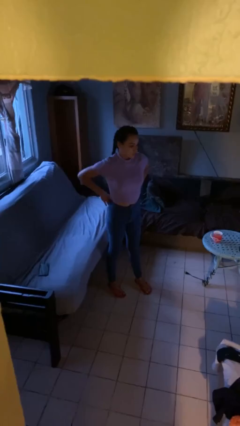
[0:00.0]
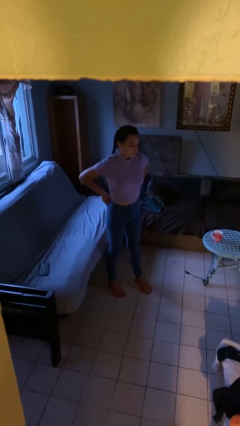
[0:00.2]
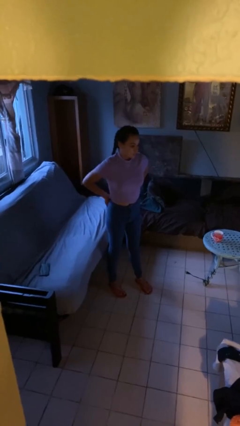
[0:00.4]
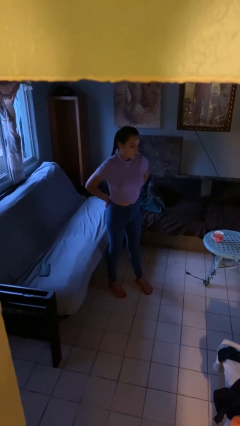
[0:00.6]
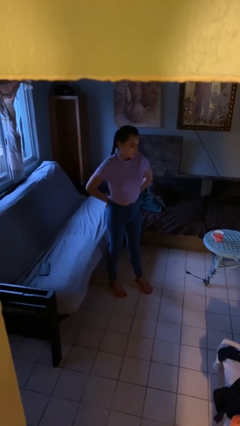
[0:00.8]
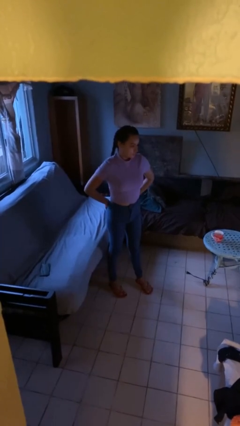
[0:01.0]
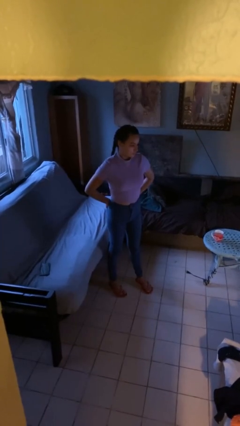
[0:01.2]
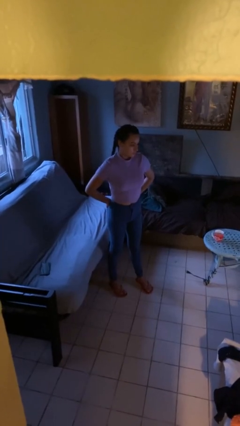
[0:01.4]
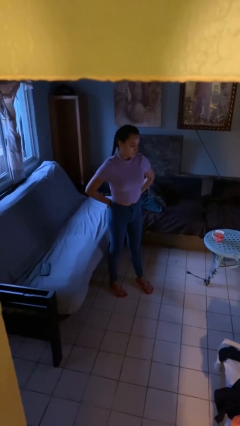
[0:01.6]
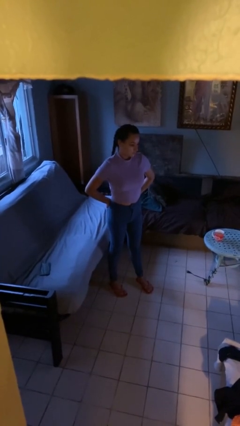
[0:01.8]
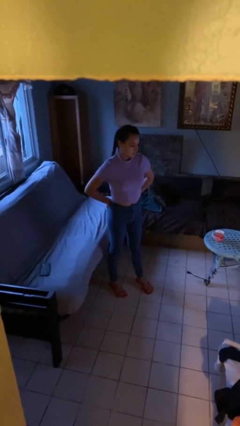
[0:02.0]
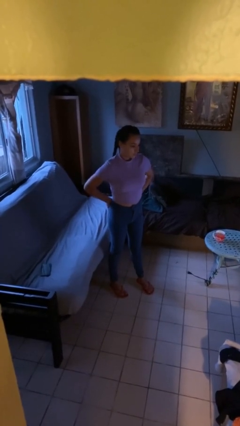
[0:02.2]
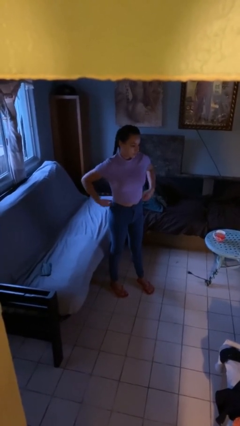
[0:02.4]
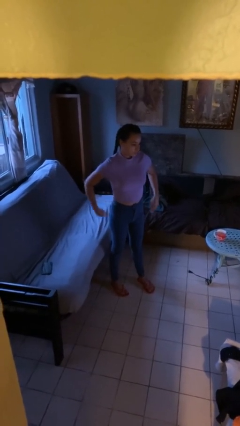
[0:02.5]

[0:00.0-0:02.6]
person puts hands in back pockets

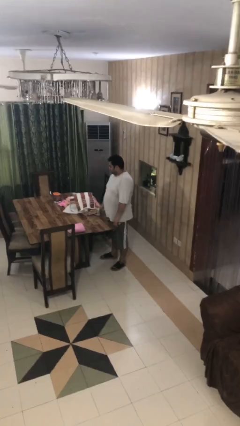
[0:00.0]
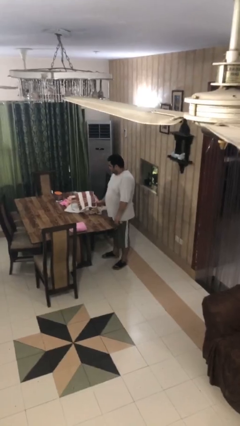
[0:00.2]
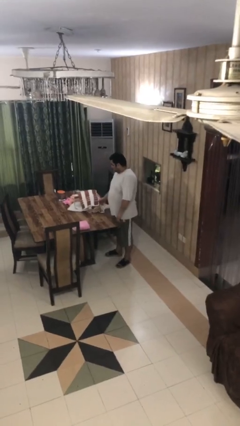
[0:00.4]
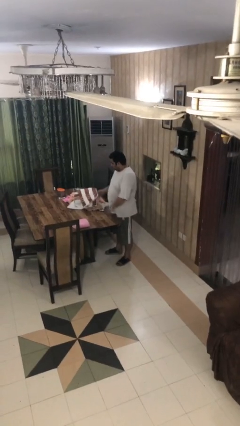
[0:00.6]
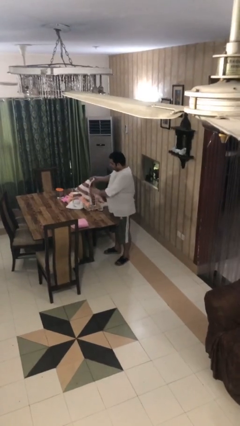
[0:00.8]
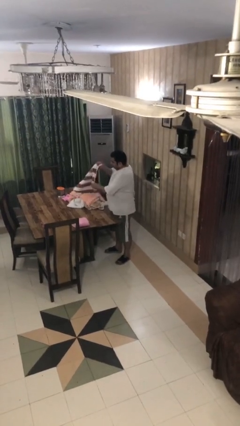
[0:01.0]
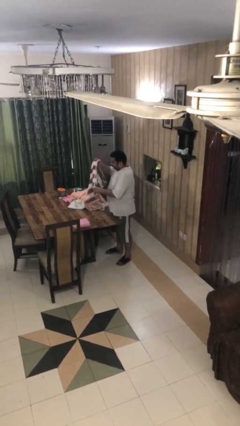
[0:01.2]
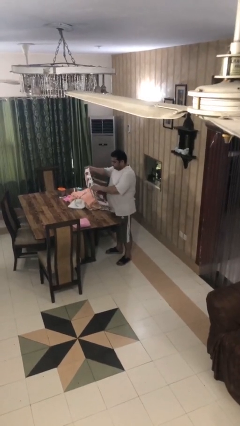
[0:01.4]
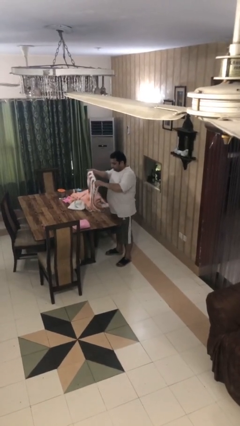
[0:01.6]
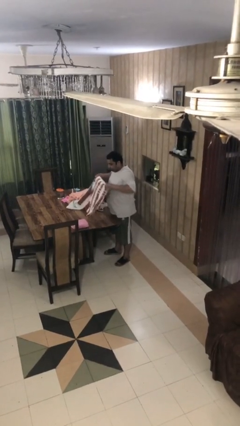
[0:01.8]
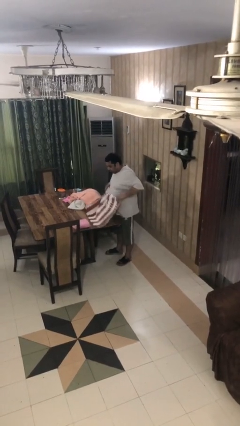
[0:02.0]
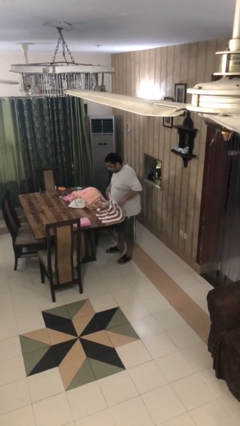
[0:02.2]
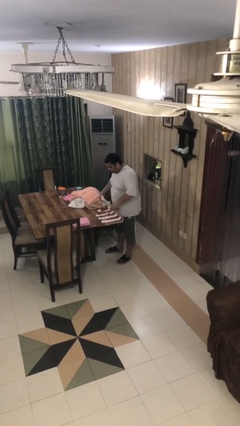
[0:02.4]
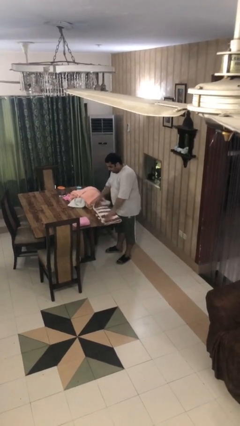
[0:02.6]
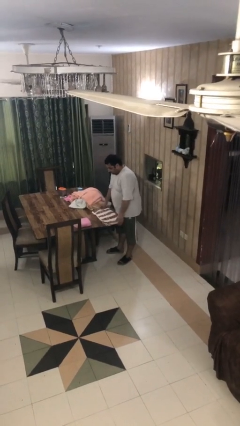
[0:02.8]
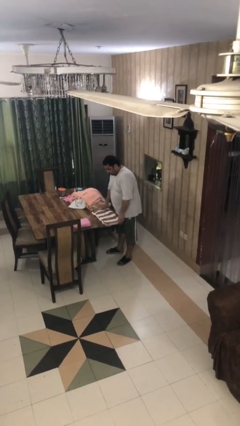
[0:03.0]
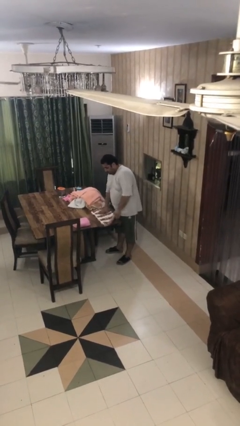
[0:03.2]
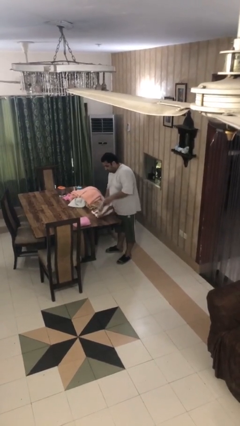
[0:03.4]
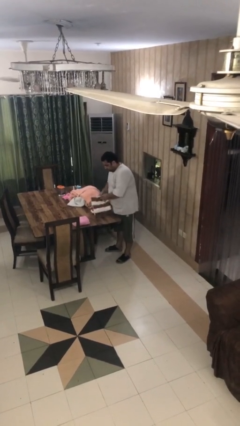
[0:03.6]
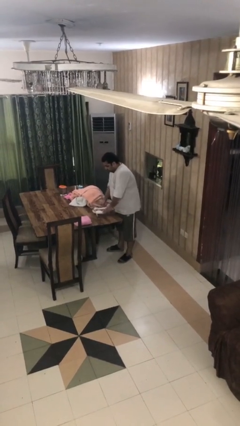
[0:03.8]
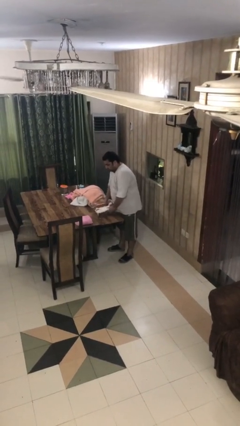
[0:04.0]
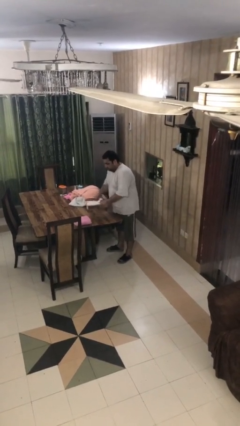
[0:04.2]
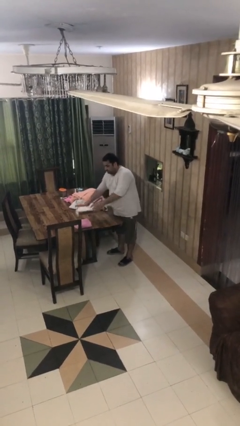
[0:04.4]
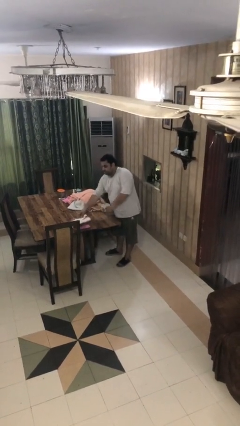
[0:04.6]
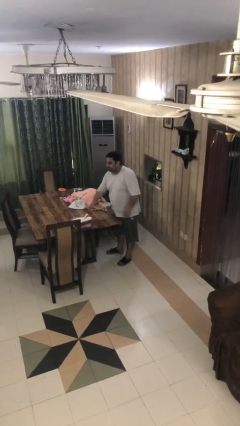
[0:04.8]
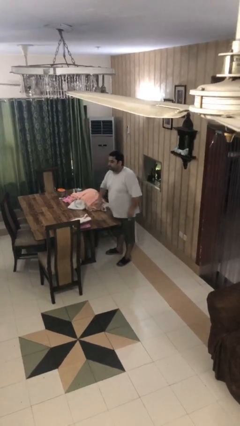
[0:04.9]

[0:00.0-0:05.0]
person folds towel

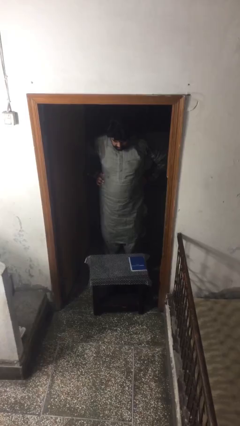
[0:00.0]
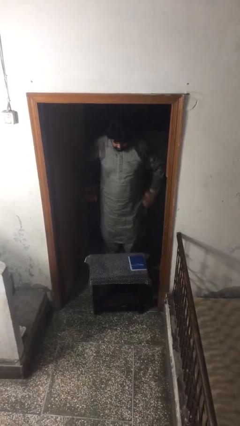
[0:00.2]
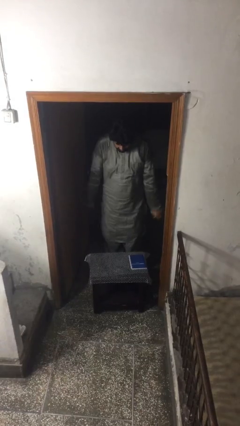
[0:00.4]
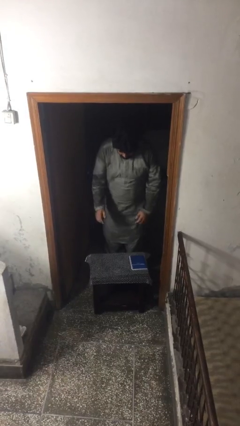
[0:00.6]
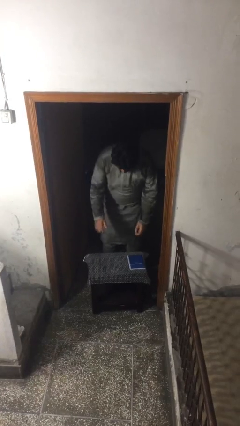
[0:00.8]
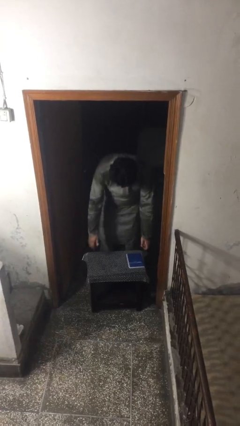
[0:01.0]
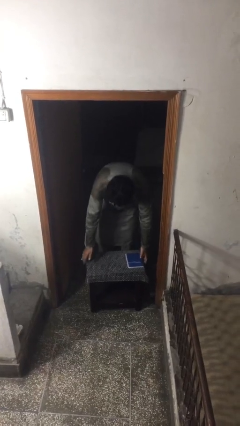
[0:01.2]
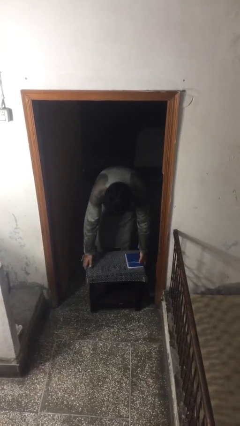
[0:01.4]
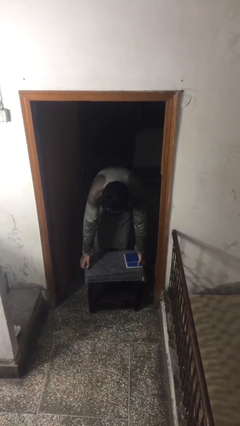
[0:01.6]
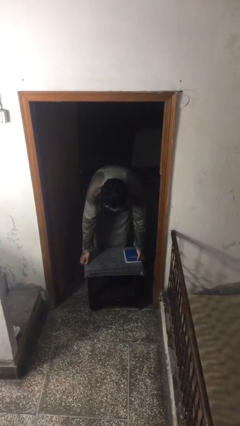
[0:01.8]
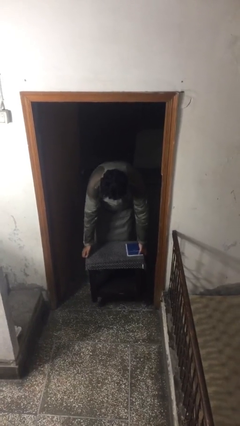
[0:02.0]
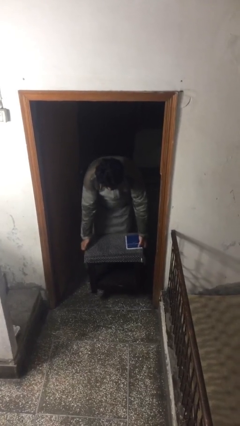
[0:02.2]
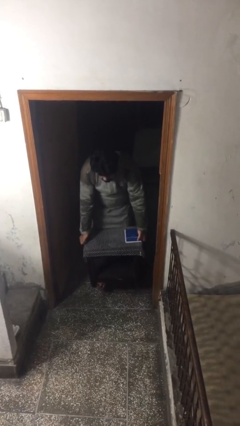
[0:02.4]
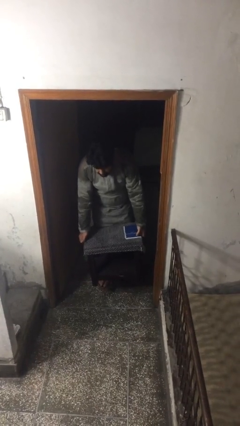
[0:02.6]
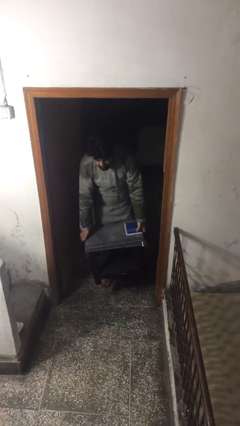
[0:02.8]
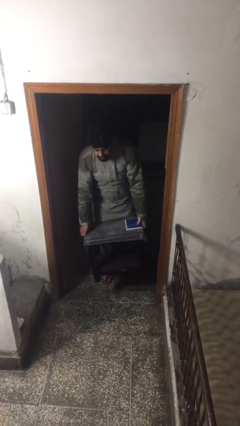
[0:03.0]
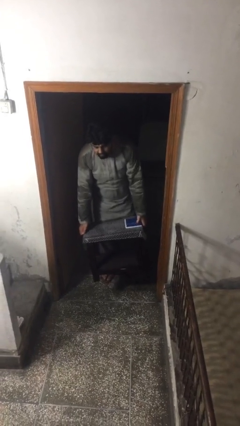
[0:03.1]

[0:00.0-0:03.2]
person picks up object from floor

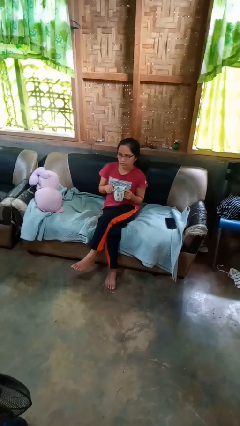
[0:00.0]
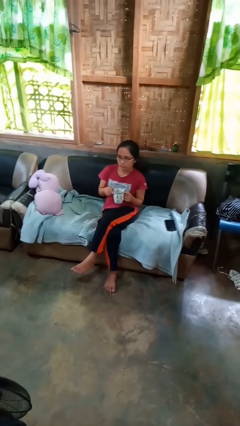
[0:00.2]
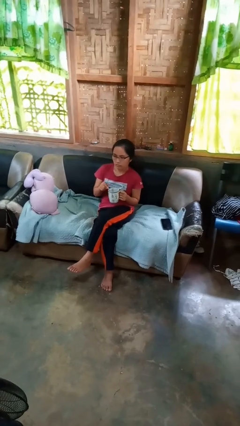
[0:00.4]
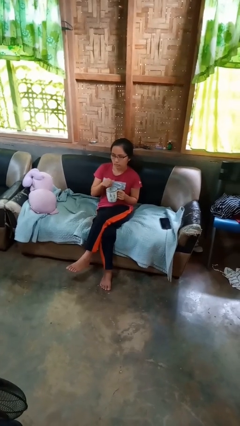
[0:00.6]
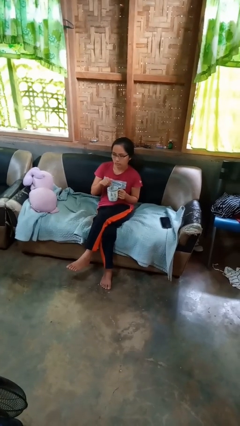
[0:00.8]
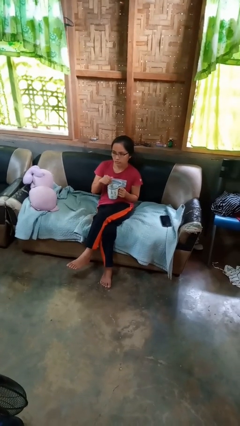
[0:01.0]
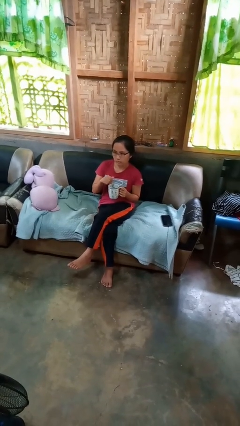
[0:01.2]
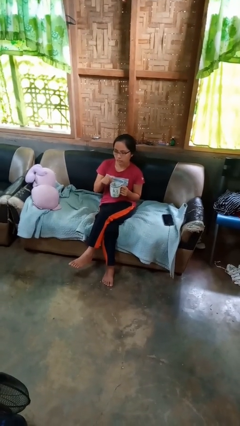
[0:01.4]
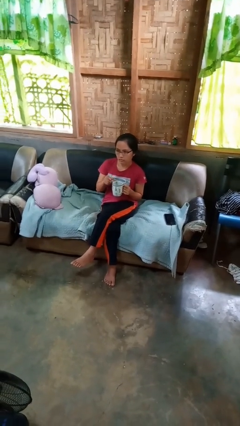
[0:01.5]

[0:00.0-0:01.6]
person stirs mug

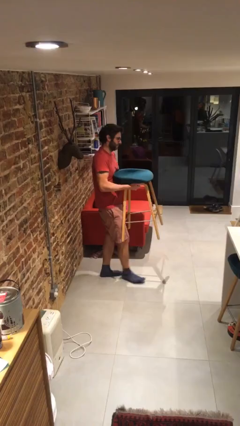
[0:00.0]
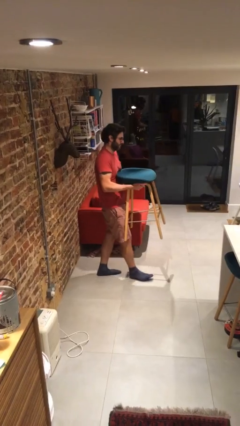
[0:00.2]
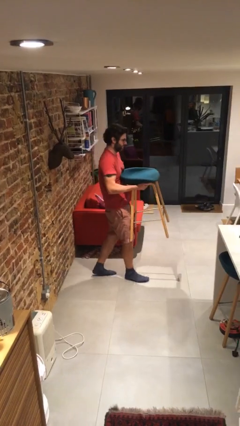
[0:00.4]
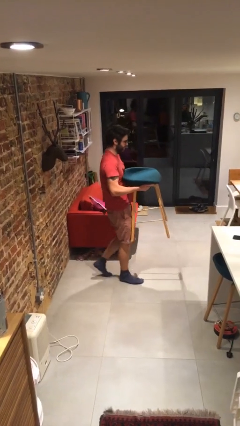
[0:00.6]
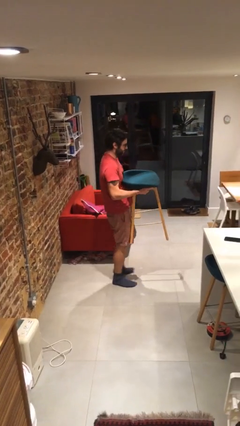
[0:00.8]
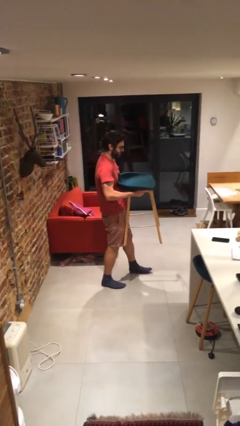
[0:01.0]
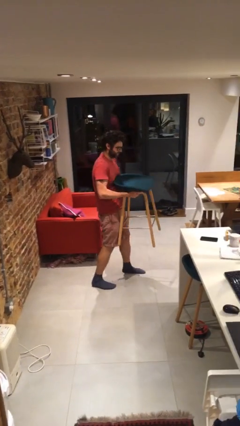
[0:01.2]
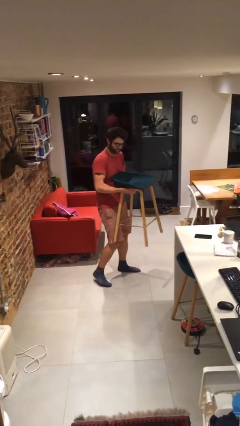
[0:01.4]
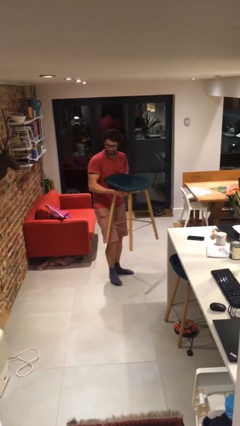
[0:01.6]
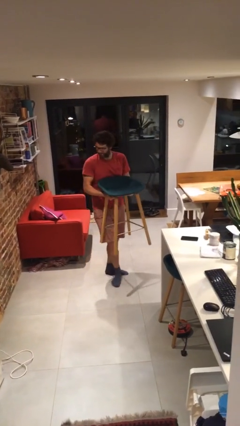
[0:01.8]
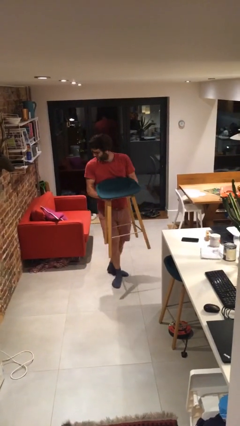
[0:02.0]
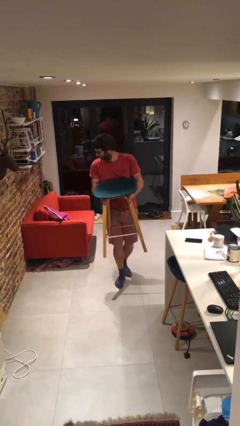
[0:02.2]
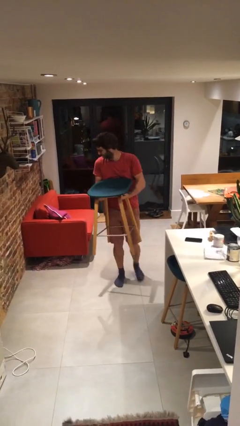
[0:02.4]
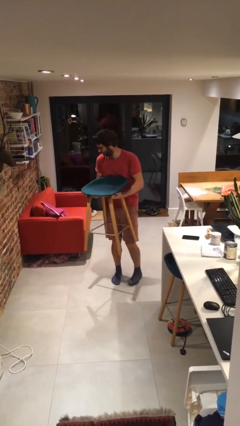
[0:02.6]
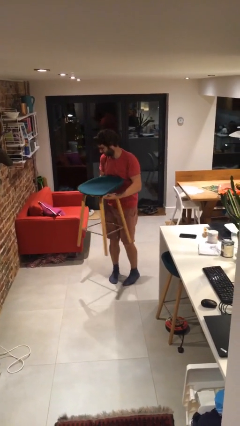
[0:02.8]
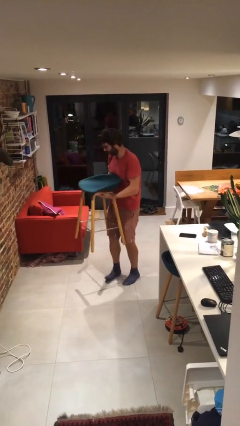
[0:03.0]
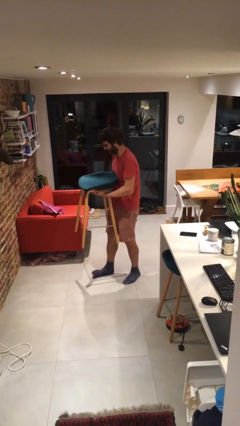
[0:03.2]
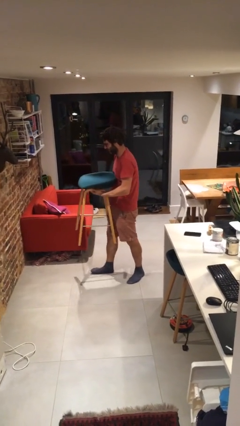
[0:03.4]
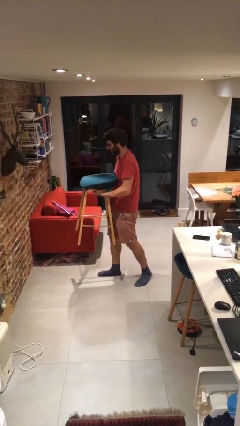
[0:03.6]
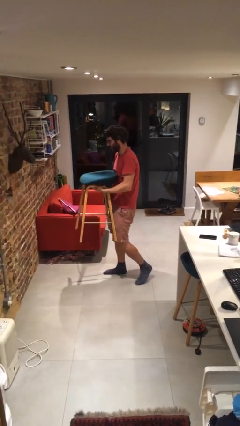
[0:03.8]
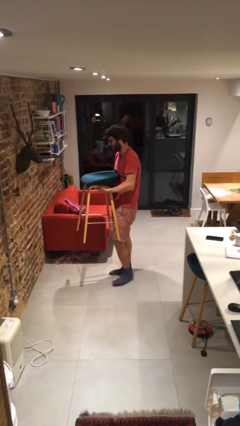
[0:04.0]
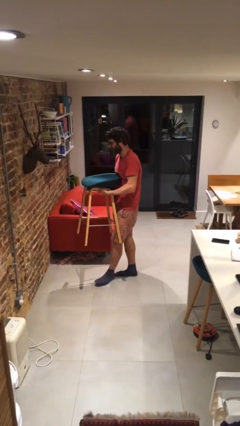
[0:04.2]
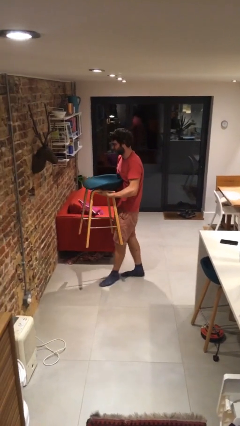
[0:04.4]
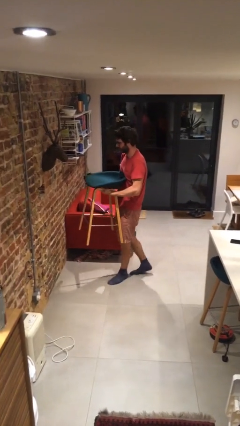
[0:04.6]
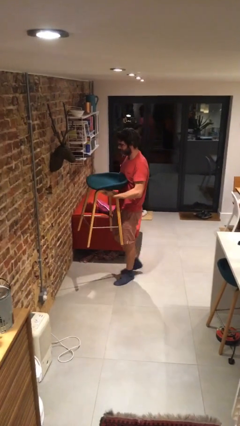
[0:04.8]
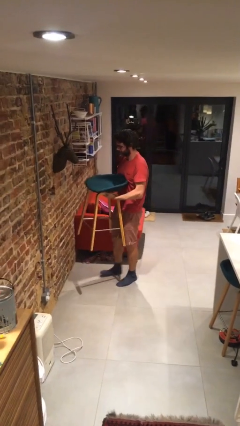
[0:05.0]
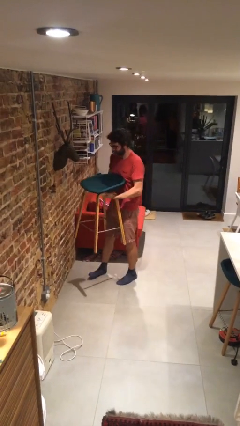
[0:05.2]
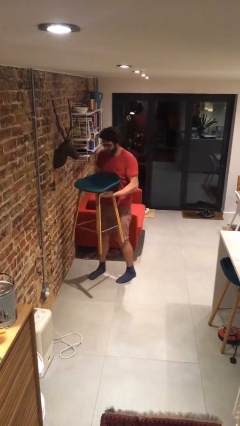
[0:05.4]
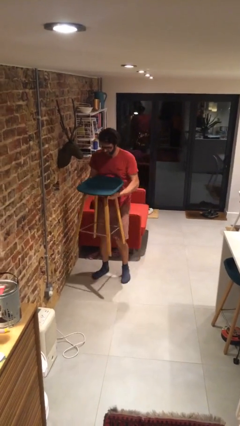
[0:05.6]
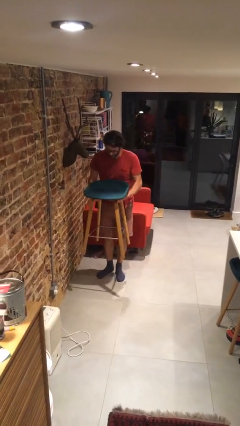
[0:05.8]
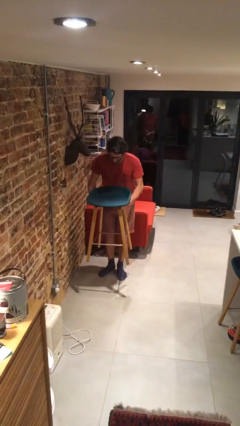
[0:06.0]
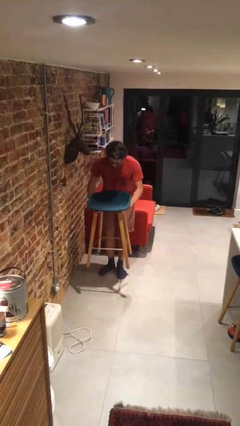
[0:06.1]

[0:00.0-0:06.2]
person carries heavy object
